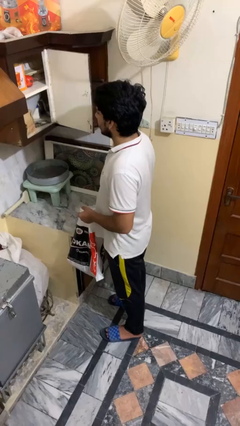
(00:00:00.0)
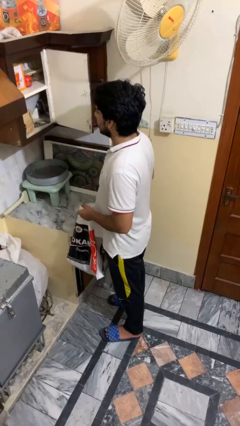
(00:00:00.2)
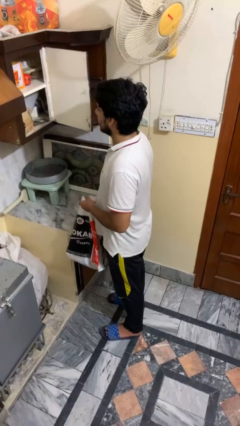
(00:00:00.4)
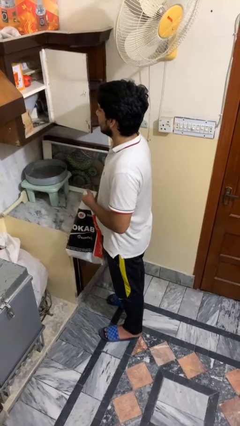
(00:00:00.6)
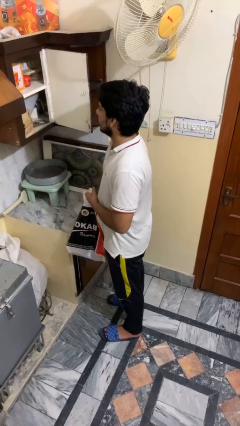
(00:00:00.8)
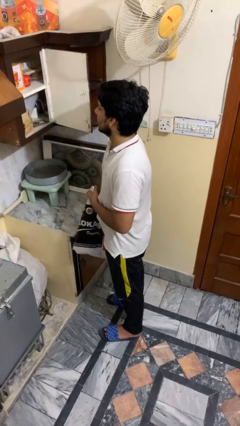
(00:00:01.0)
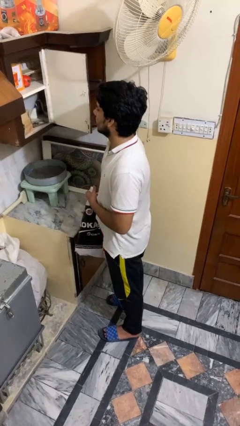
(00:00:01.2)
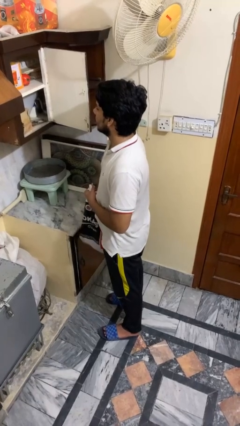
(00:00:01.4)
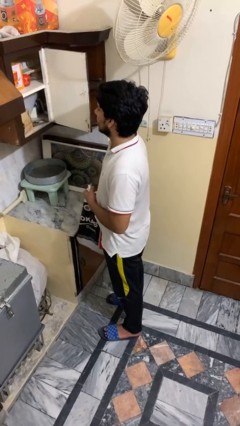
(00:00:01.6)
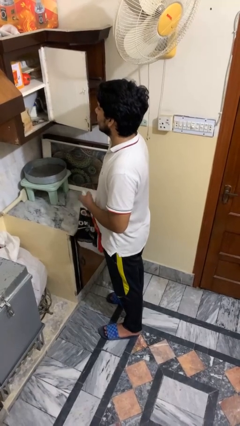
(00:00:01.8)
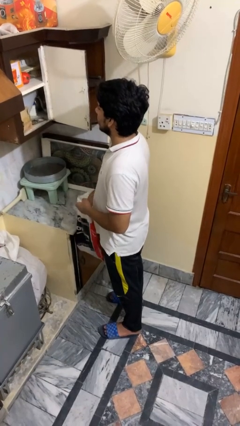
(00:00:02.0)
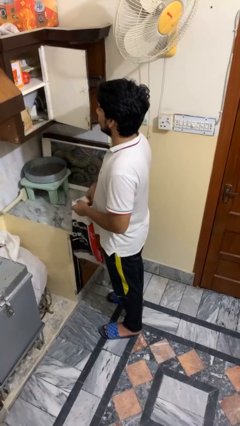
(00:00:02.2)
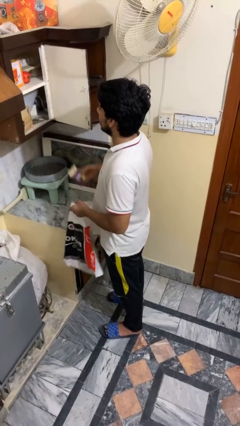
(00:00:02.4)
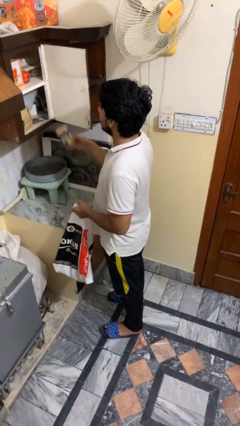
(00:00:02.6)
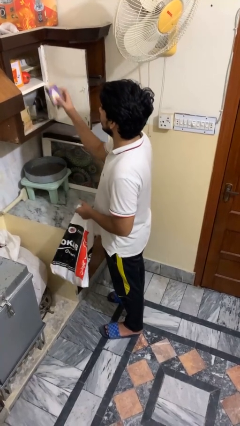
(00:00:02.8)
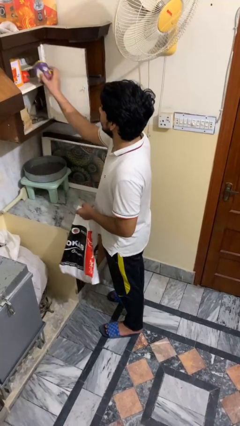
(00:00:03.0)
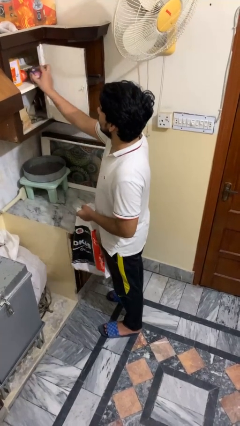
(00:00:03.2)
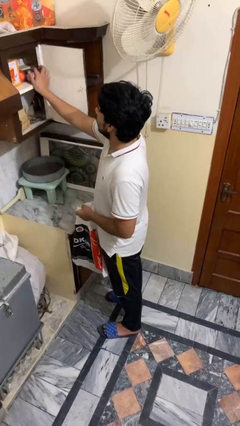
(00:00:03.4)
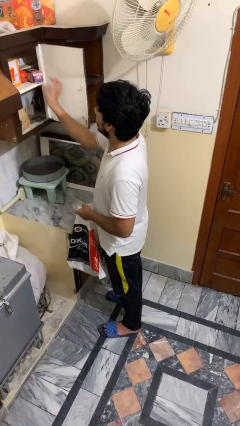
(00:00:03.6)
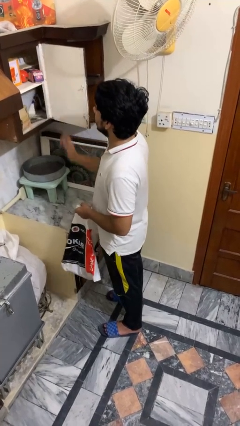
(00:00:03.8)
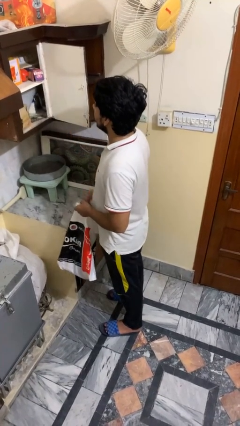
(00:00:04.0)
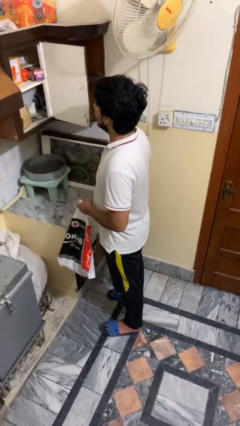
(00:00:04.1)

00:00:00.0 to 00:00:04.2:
person loads groceries into cabinet

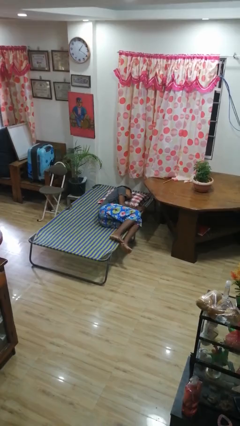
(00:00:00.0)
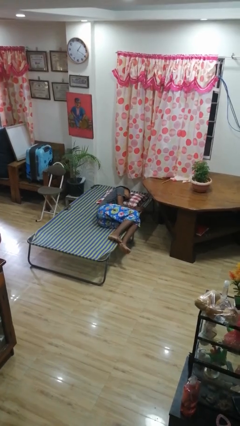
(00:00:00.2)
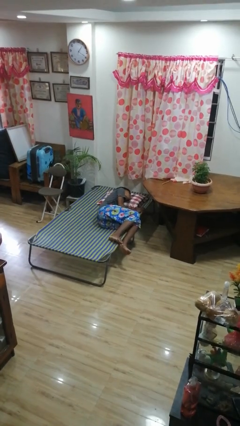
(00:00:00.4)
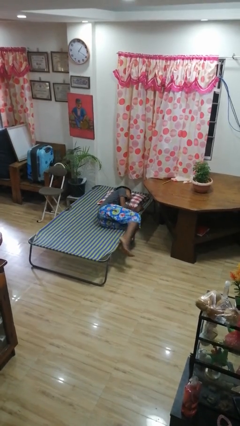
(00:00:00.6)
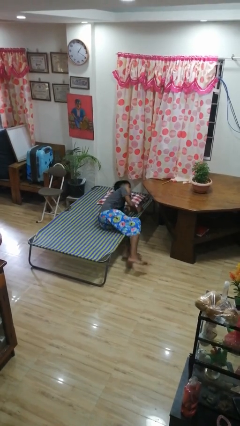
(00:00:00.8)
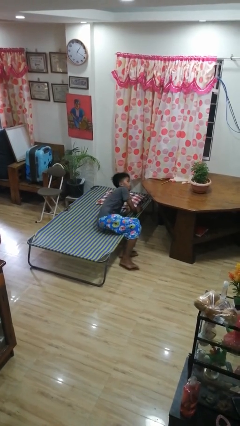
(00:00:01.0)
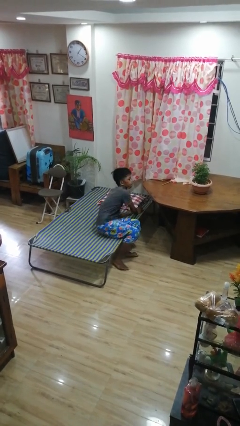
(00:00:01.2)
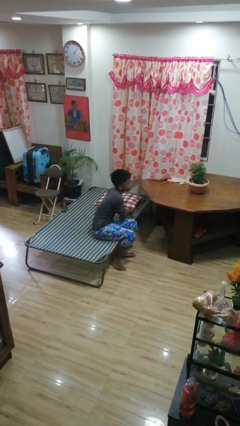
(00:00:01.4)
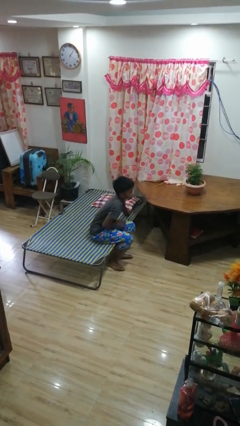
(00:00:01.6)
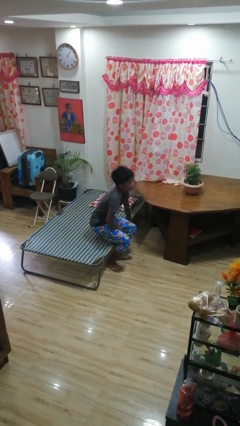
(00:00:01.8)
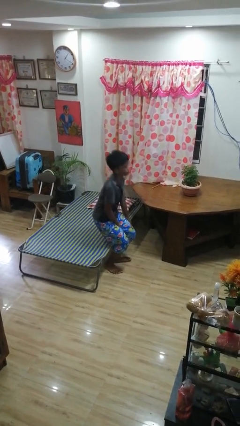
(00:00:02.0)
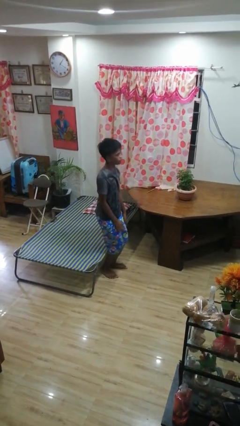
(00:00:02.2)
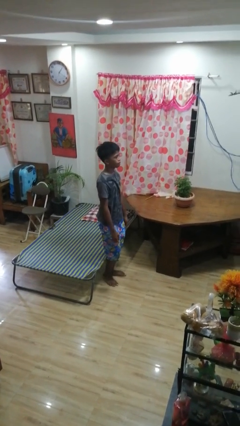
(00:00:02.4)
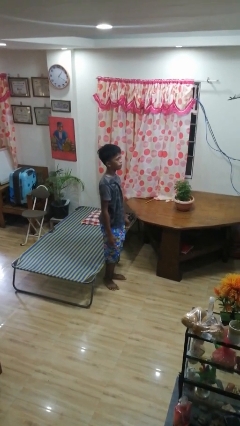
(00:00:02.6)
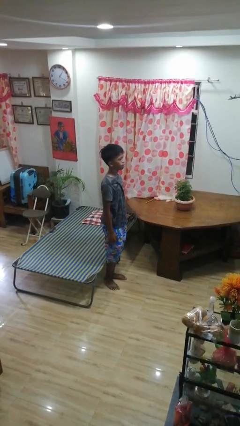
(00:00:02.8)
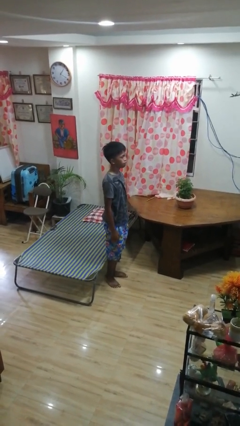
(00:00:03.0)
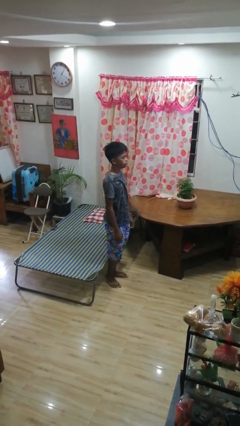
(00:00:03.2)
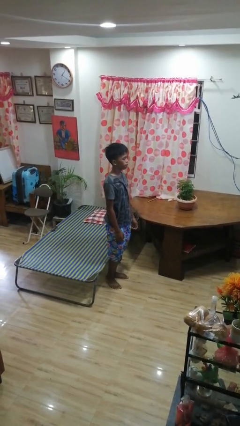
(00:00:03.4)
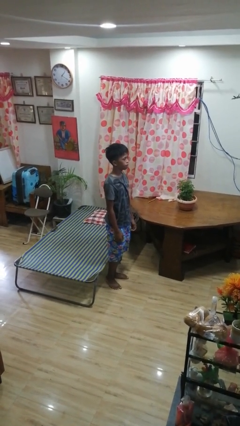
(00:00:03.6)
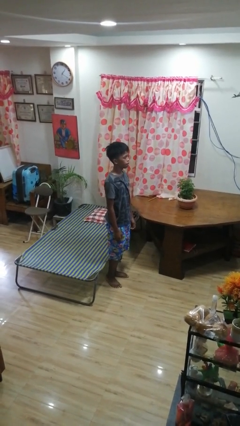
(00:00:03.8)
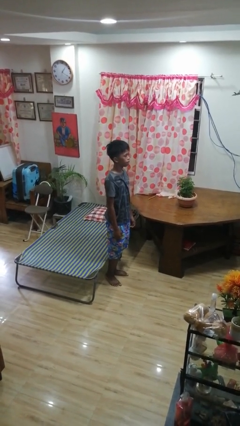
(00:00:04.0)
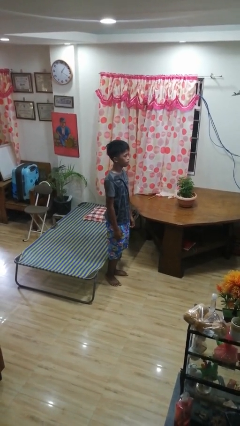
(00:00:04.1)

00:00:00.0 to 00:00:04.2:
person stands up

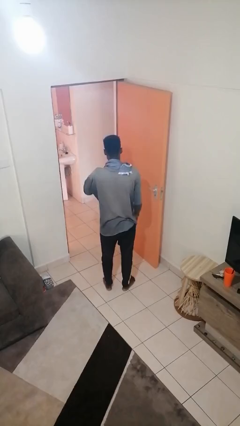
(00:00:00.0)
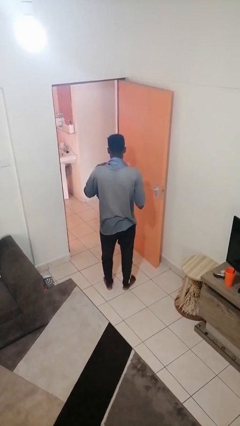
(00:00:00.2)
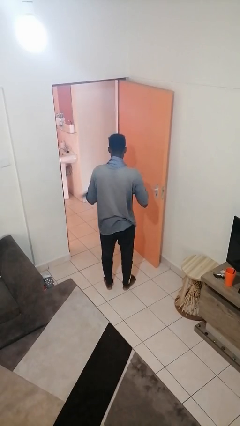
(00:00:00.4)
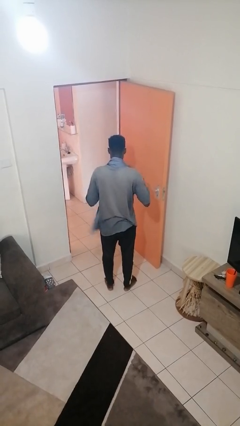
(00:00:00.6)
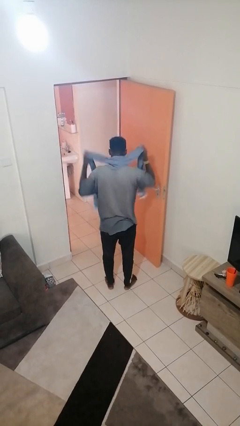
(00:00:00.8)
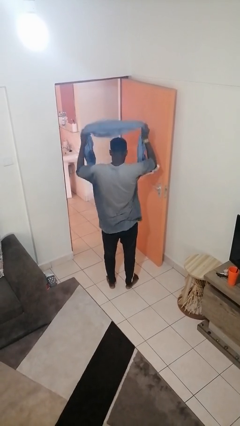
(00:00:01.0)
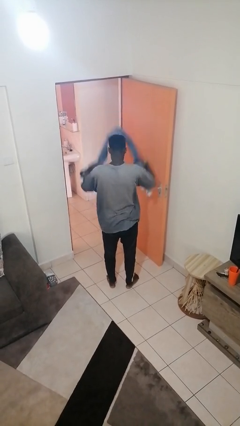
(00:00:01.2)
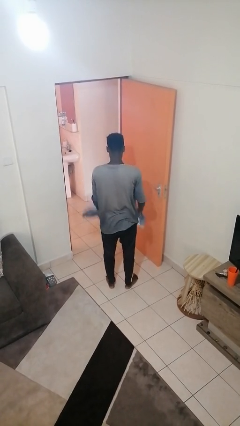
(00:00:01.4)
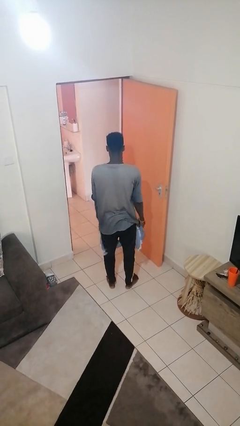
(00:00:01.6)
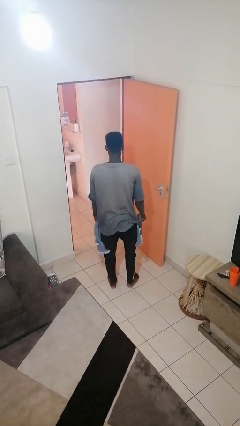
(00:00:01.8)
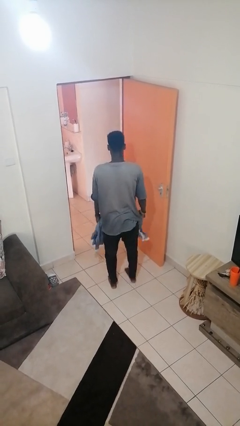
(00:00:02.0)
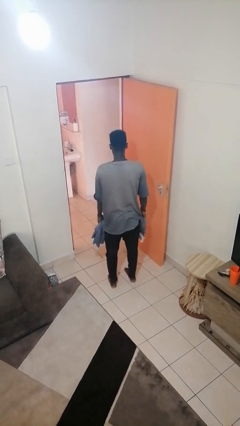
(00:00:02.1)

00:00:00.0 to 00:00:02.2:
person takes off scarf

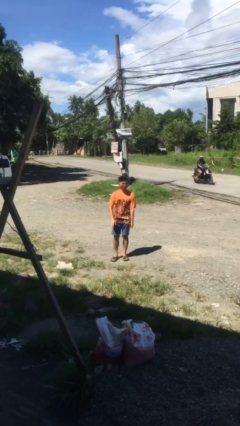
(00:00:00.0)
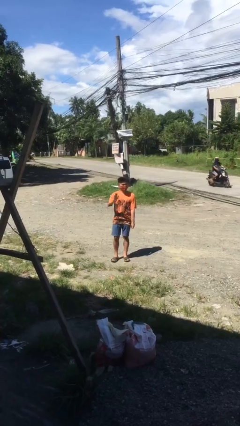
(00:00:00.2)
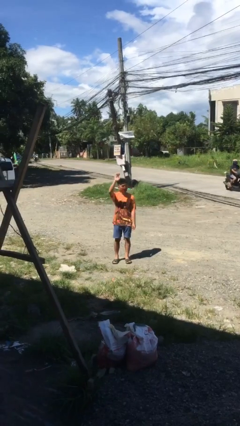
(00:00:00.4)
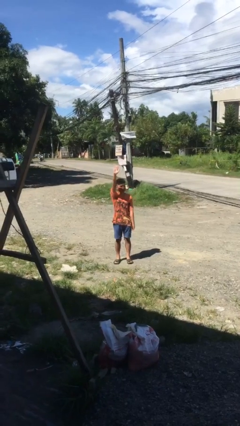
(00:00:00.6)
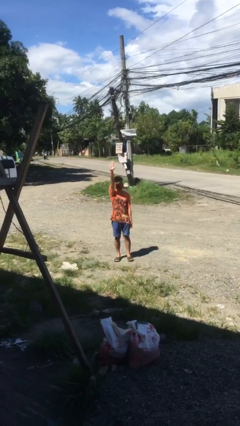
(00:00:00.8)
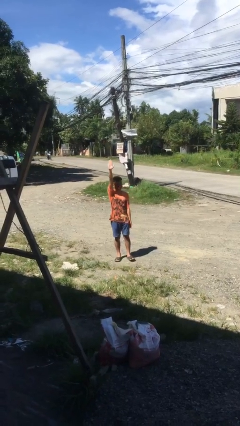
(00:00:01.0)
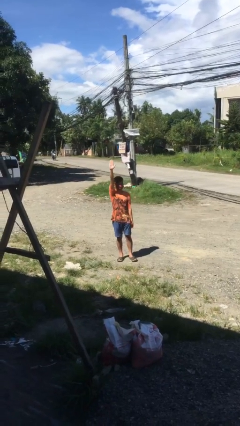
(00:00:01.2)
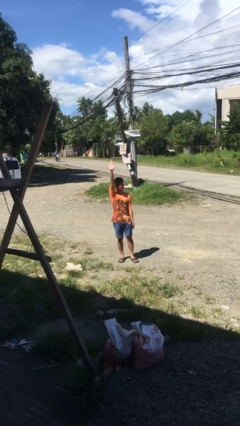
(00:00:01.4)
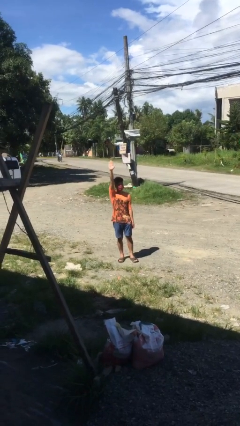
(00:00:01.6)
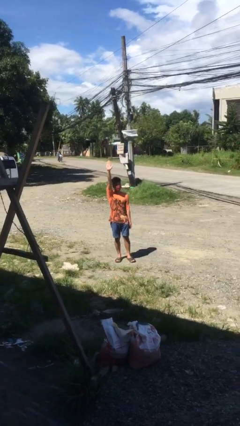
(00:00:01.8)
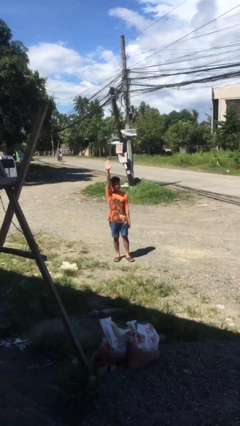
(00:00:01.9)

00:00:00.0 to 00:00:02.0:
person gestures raise hand

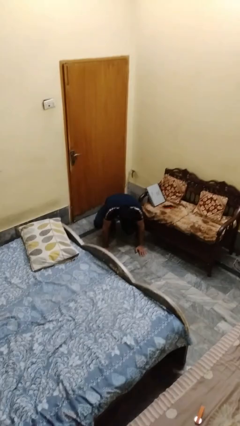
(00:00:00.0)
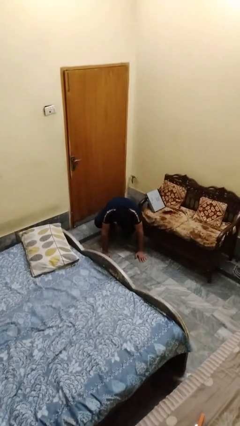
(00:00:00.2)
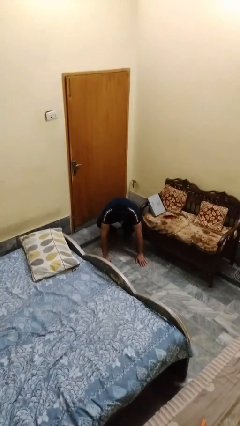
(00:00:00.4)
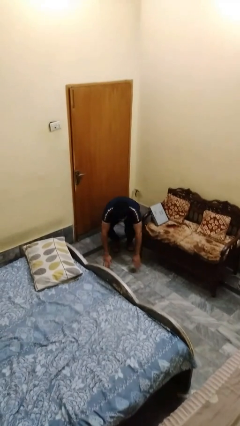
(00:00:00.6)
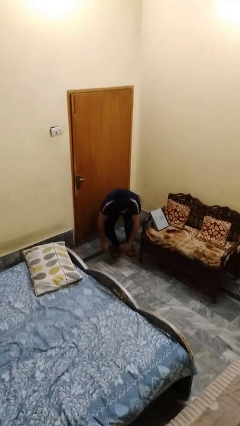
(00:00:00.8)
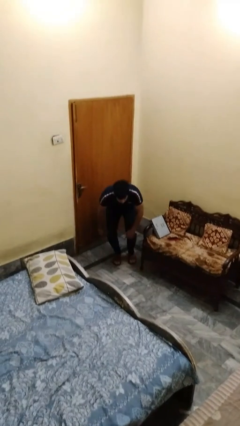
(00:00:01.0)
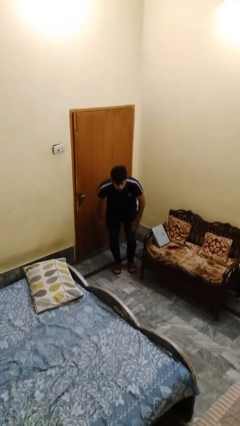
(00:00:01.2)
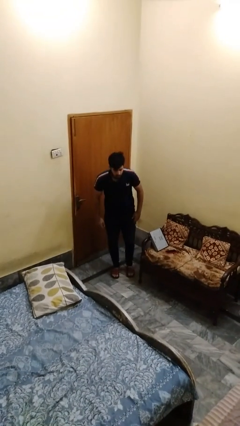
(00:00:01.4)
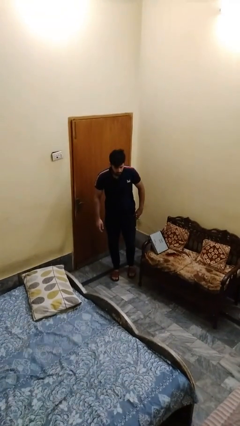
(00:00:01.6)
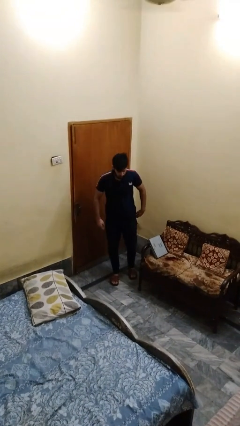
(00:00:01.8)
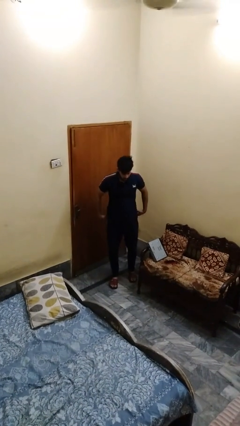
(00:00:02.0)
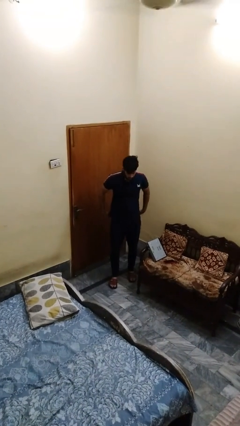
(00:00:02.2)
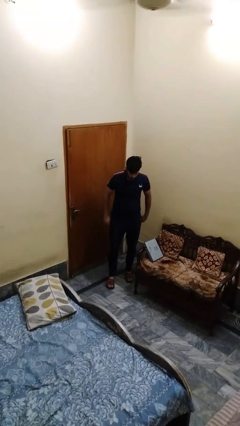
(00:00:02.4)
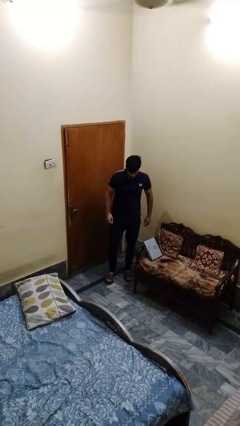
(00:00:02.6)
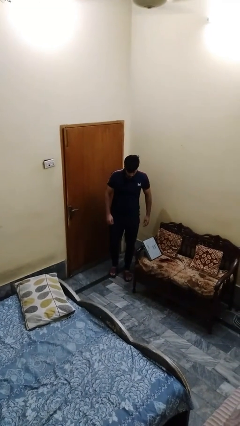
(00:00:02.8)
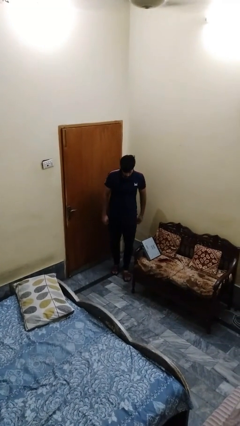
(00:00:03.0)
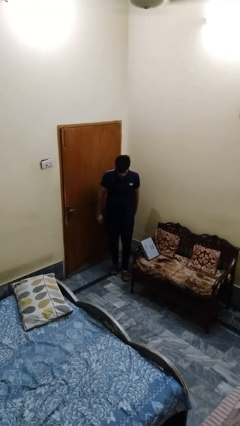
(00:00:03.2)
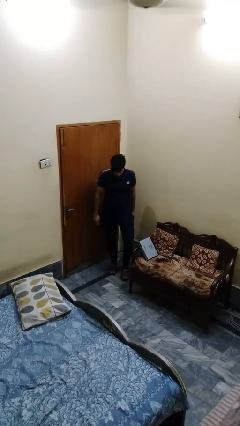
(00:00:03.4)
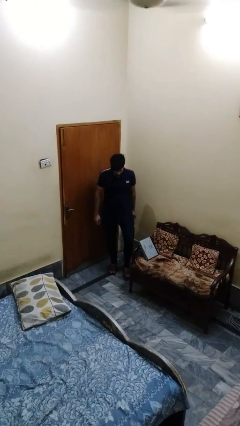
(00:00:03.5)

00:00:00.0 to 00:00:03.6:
person stands up from floor

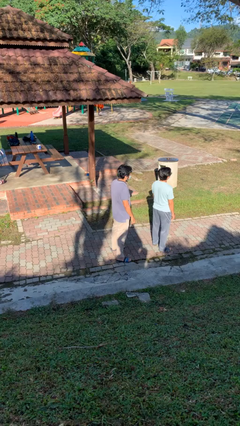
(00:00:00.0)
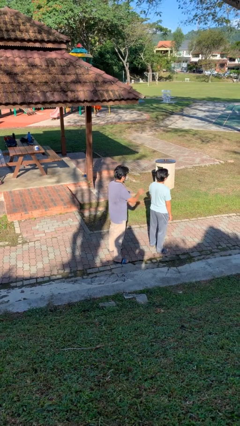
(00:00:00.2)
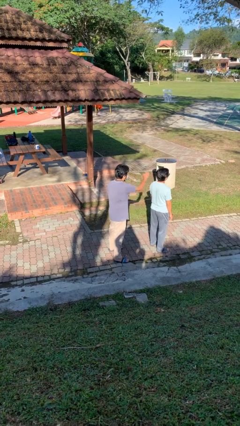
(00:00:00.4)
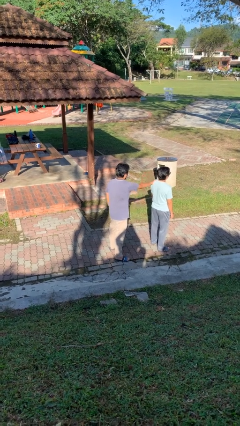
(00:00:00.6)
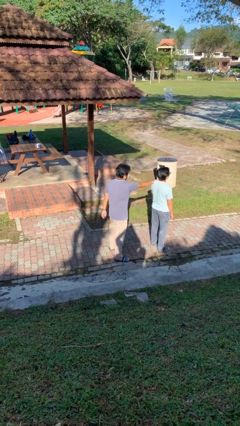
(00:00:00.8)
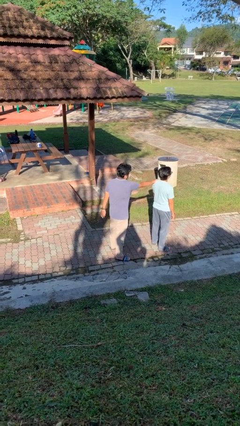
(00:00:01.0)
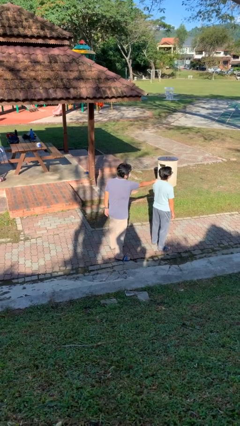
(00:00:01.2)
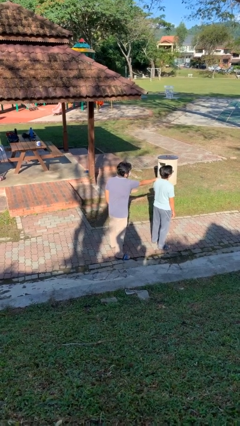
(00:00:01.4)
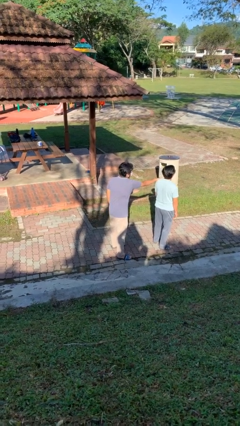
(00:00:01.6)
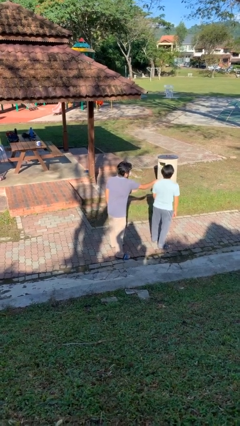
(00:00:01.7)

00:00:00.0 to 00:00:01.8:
person grabs person by shoulder
